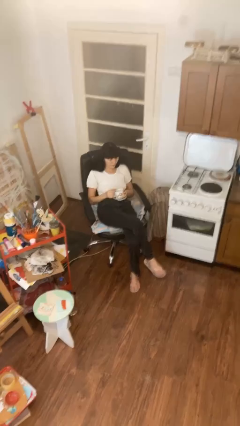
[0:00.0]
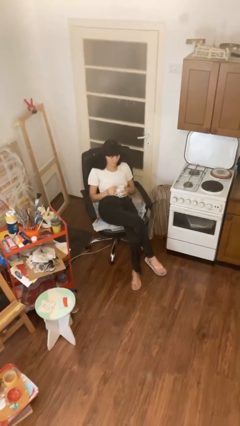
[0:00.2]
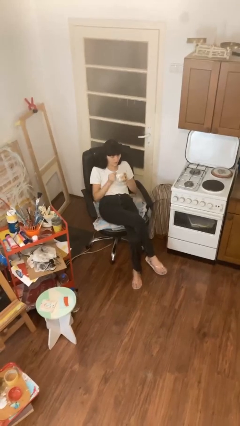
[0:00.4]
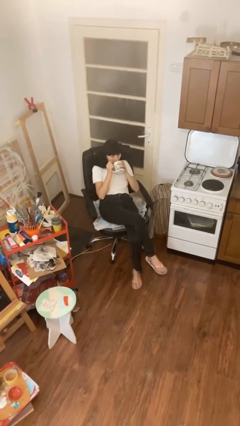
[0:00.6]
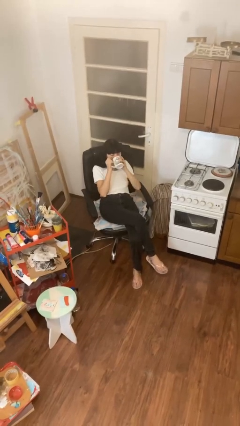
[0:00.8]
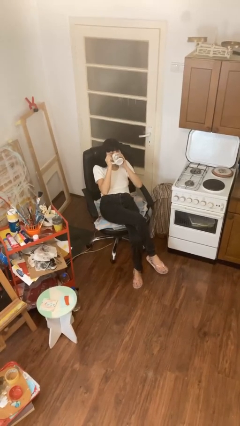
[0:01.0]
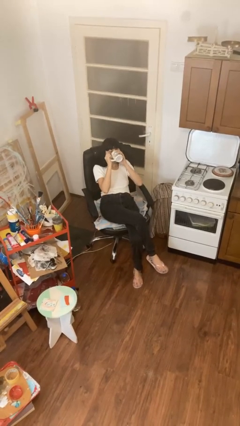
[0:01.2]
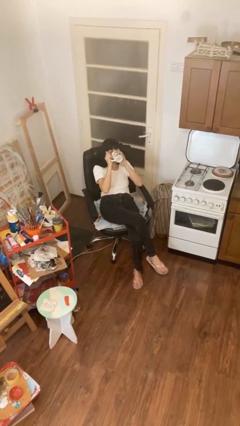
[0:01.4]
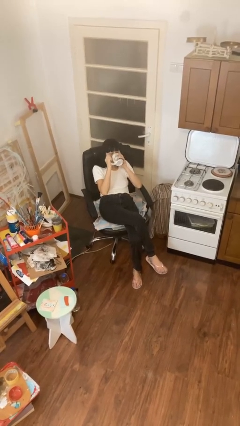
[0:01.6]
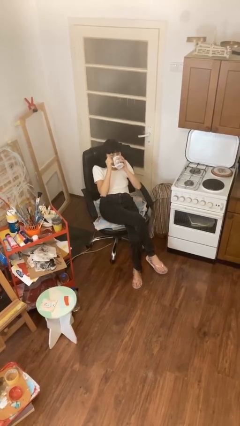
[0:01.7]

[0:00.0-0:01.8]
person drinks from mug

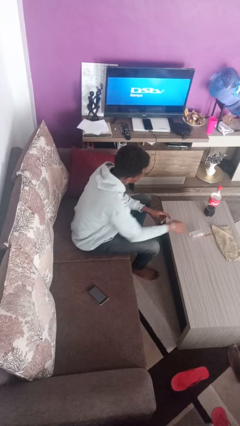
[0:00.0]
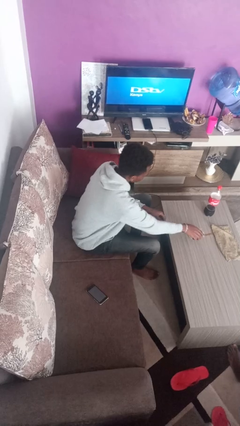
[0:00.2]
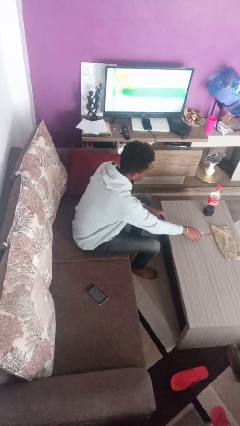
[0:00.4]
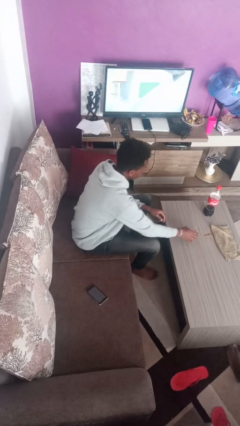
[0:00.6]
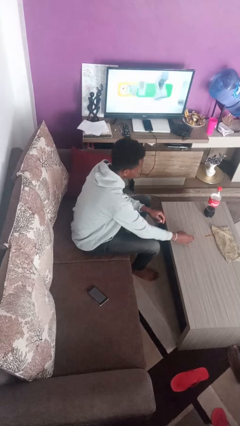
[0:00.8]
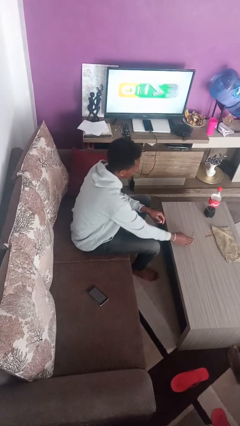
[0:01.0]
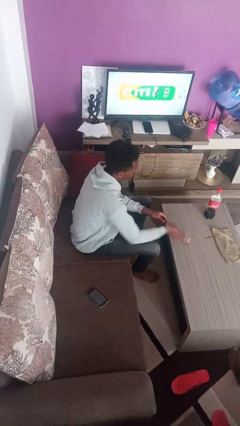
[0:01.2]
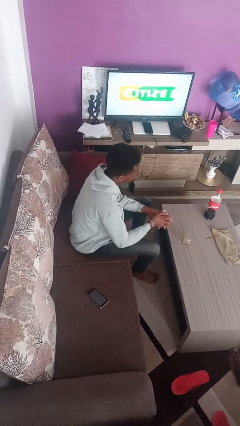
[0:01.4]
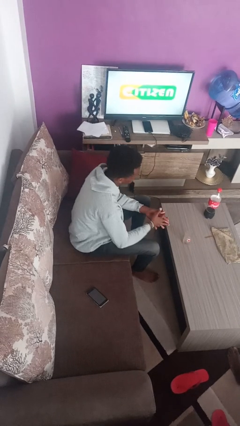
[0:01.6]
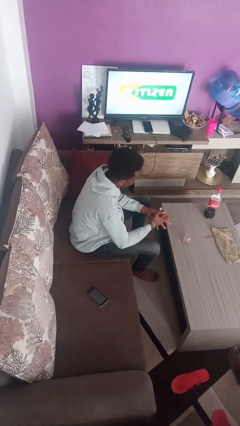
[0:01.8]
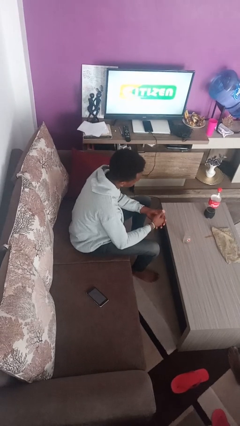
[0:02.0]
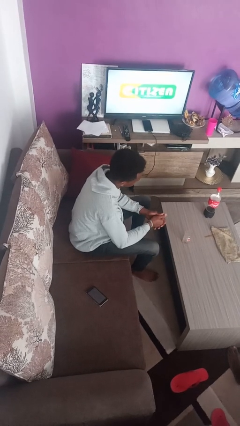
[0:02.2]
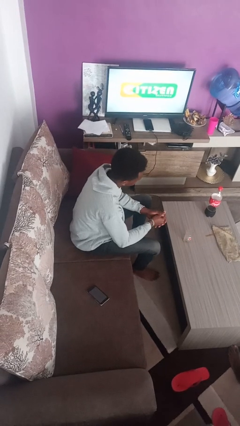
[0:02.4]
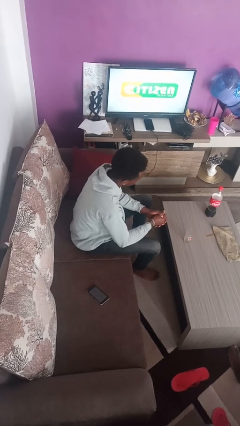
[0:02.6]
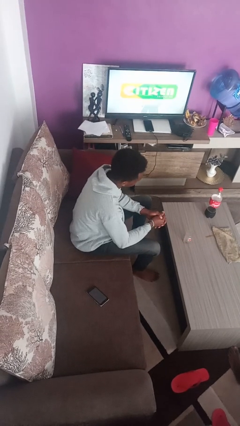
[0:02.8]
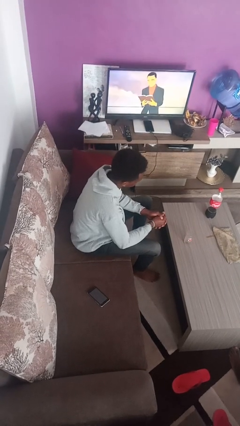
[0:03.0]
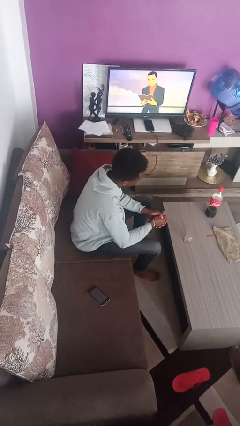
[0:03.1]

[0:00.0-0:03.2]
person sets upright glass

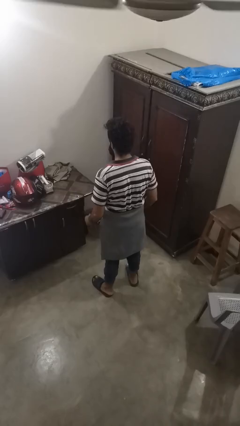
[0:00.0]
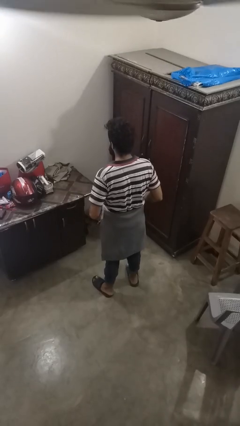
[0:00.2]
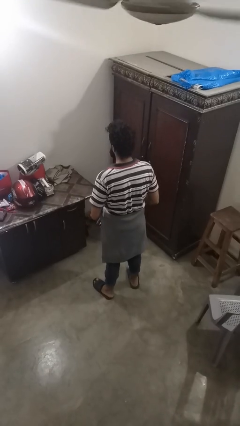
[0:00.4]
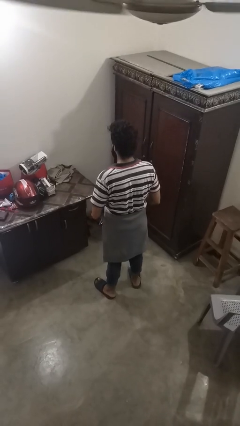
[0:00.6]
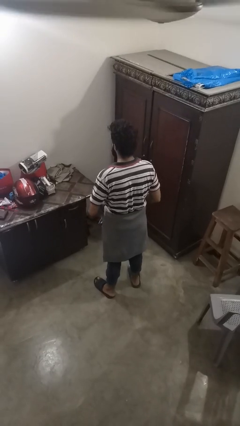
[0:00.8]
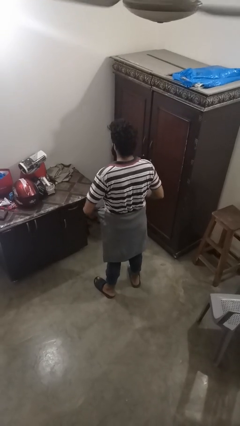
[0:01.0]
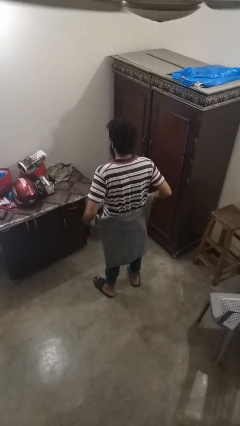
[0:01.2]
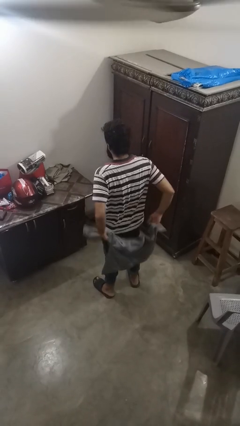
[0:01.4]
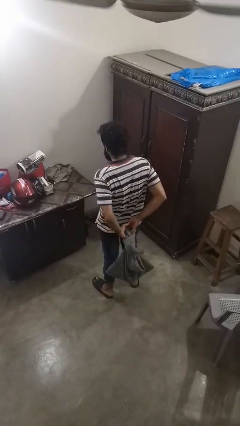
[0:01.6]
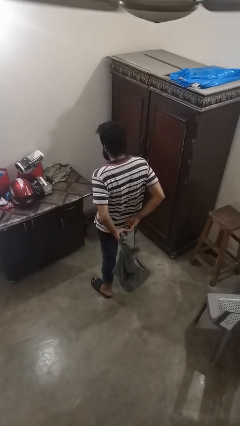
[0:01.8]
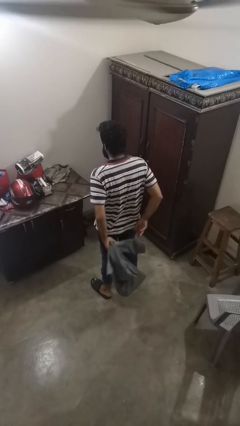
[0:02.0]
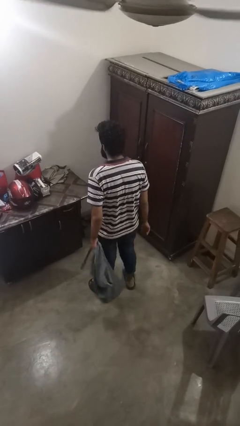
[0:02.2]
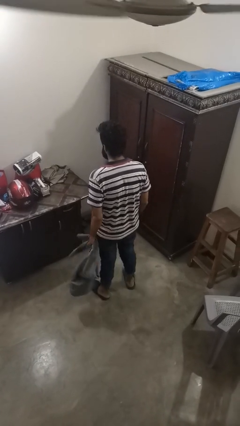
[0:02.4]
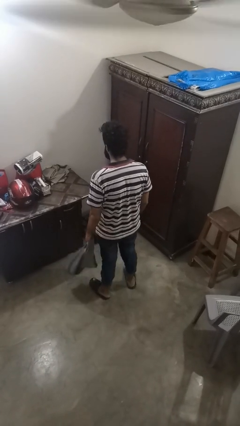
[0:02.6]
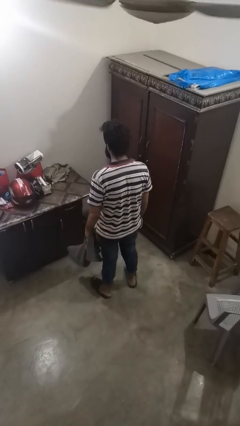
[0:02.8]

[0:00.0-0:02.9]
person unties jacket around waist

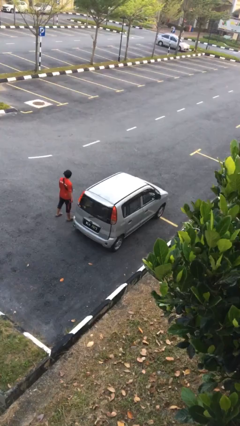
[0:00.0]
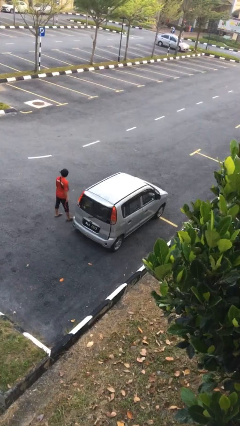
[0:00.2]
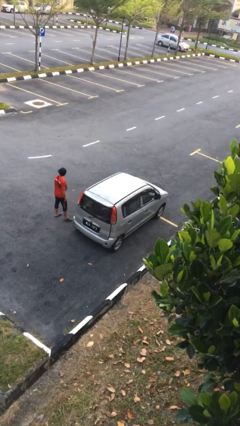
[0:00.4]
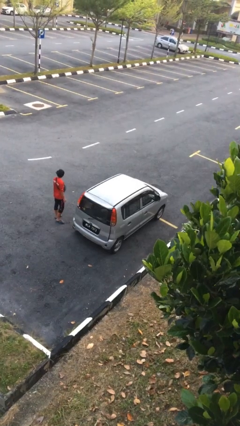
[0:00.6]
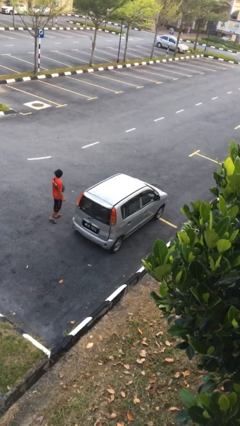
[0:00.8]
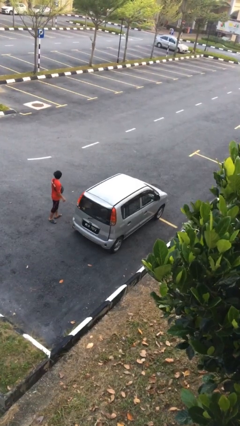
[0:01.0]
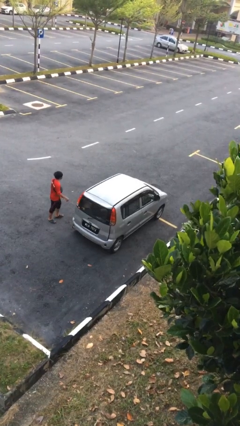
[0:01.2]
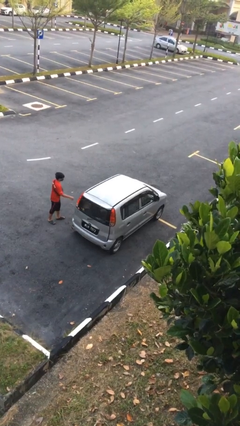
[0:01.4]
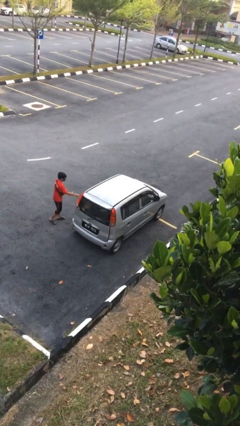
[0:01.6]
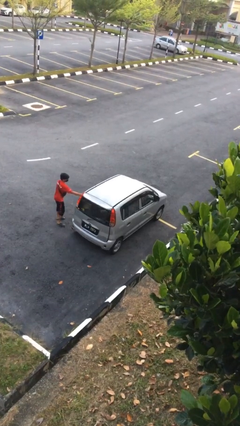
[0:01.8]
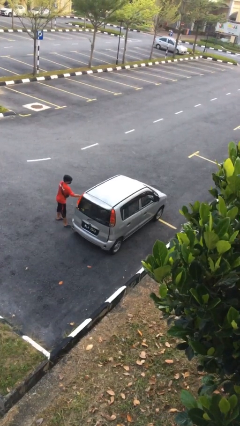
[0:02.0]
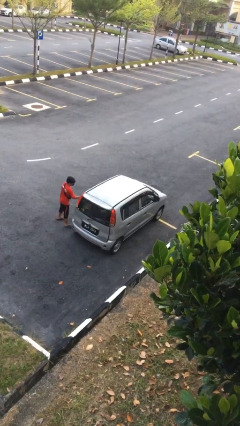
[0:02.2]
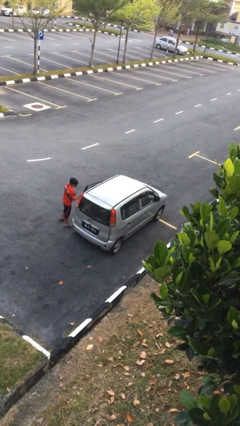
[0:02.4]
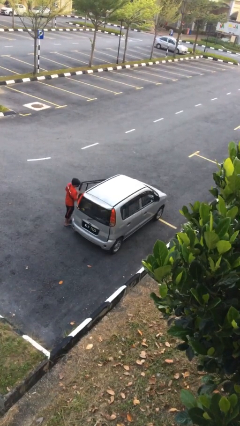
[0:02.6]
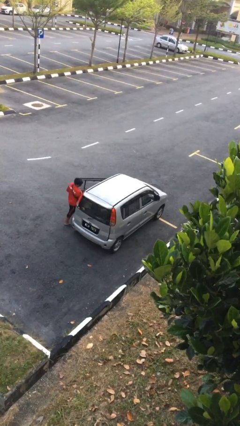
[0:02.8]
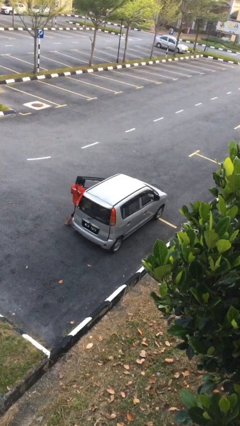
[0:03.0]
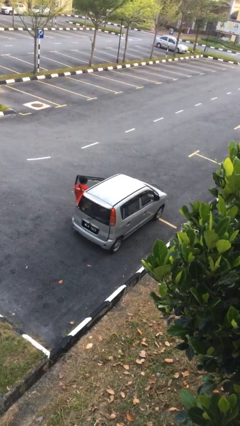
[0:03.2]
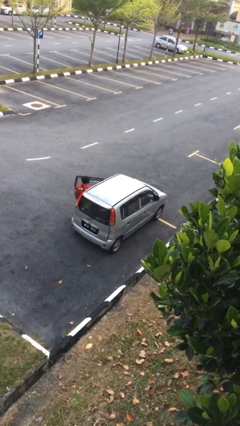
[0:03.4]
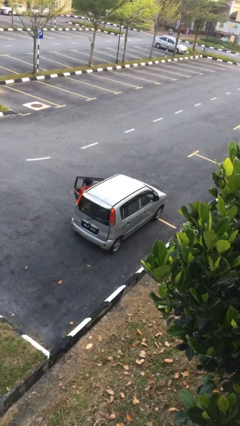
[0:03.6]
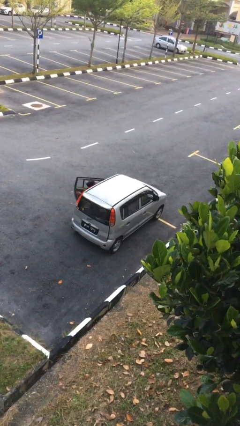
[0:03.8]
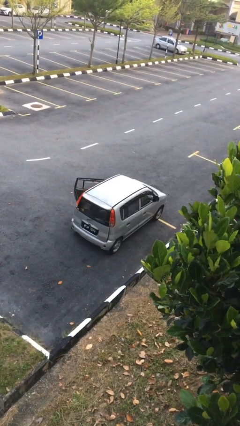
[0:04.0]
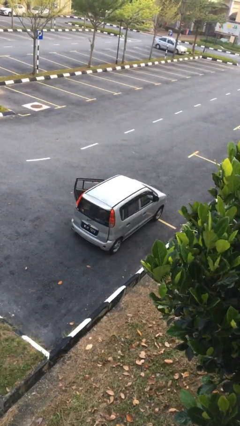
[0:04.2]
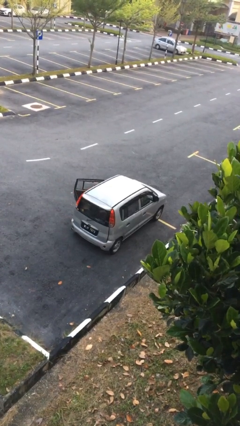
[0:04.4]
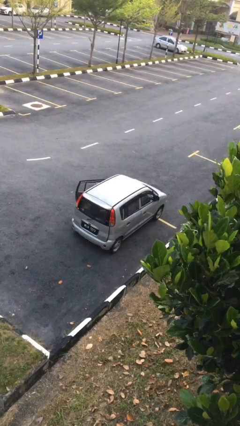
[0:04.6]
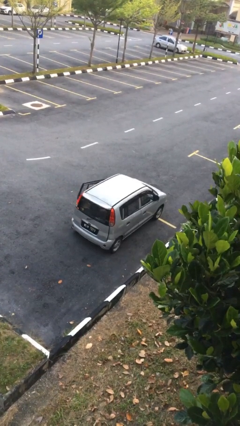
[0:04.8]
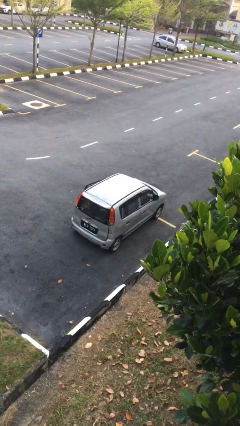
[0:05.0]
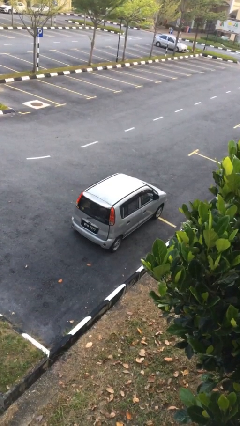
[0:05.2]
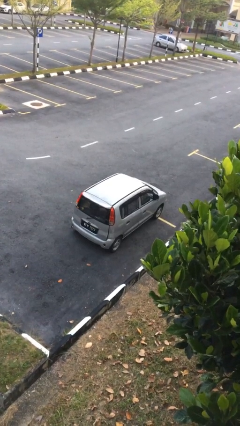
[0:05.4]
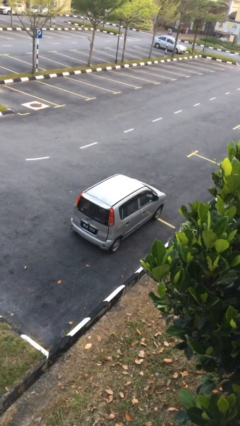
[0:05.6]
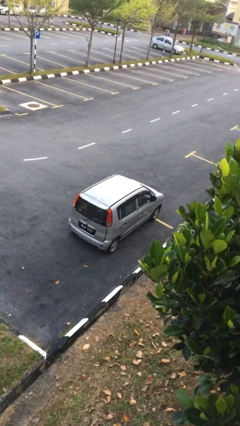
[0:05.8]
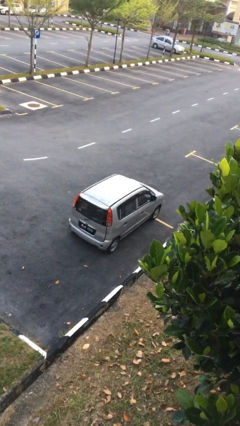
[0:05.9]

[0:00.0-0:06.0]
car picks up person

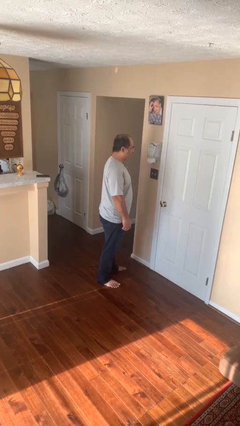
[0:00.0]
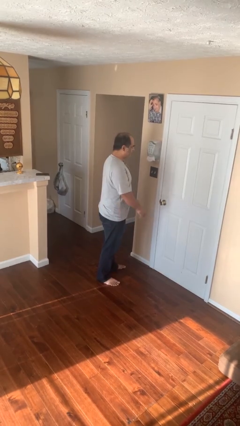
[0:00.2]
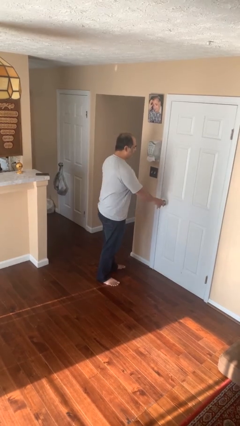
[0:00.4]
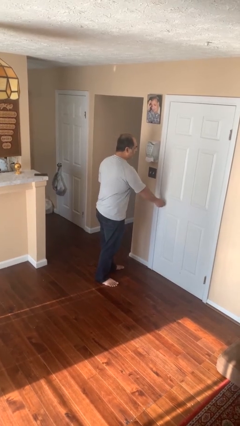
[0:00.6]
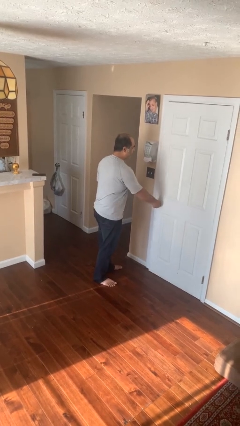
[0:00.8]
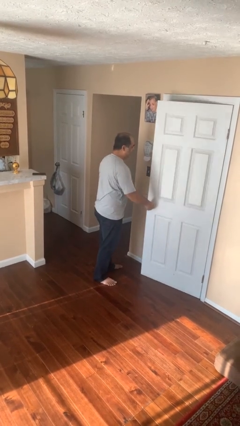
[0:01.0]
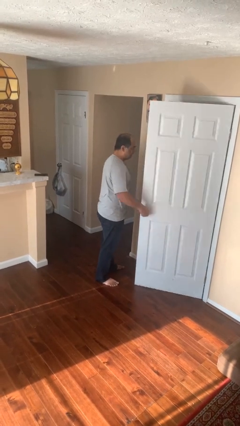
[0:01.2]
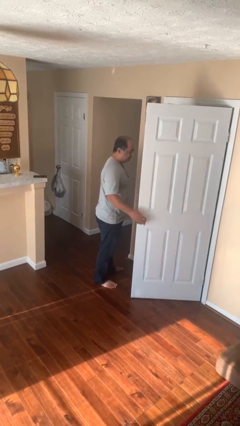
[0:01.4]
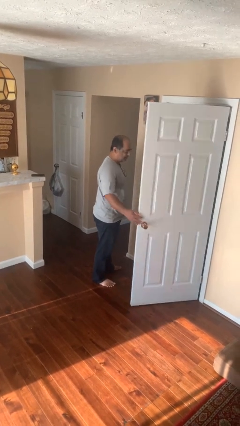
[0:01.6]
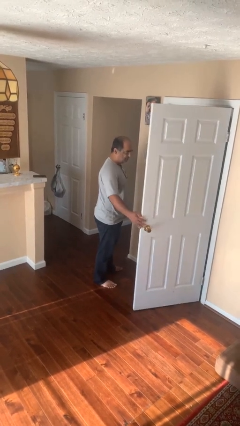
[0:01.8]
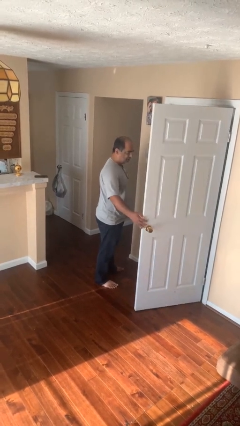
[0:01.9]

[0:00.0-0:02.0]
person opens facility door

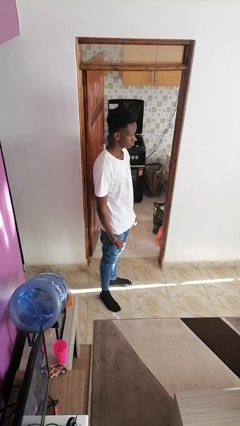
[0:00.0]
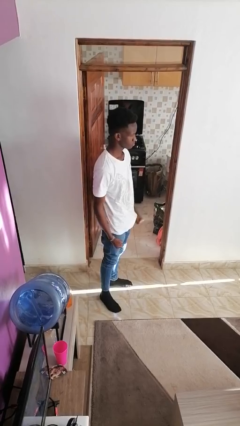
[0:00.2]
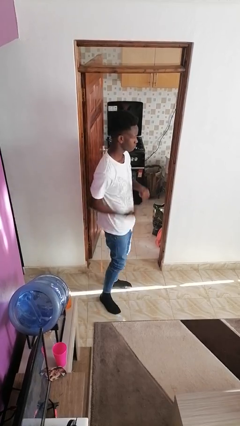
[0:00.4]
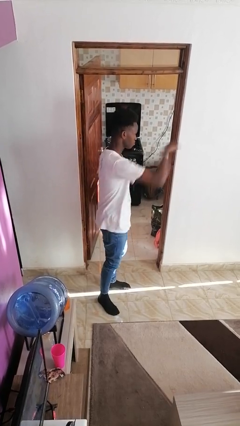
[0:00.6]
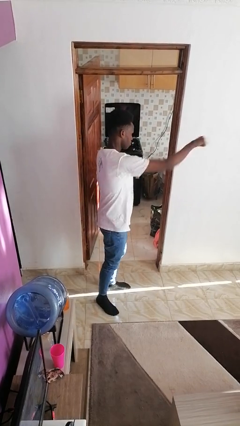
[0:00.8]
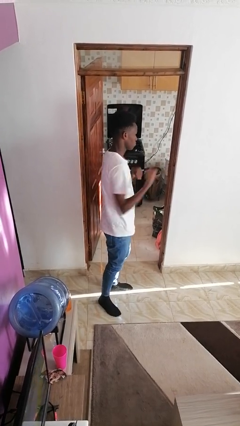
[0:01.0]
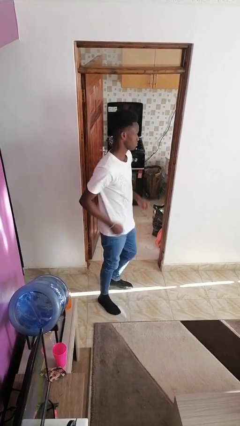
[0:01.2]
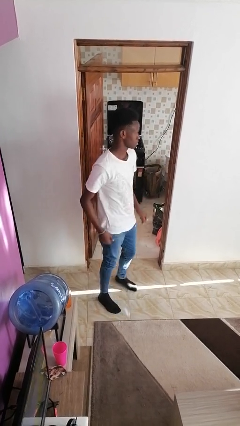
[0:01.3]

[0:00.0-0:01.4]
person punches
